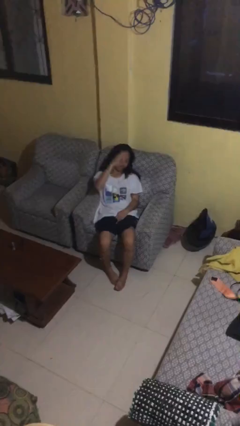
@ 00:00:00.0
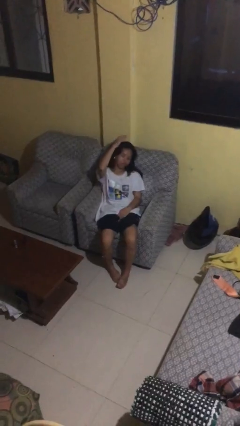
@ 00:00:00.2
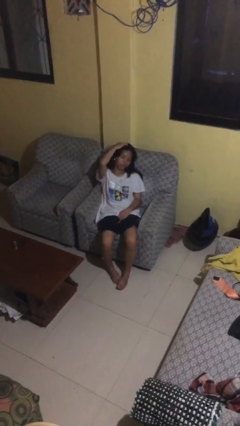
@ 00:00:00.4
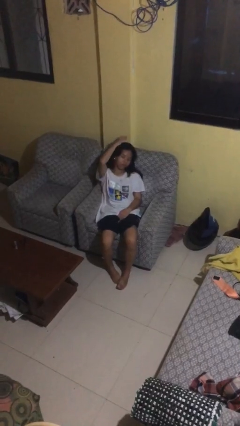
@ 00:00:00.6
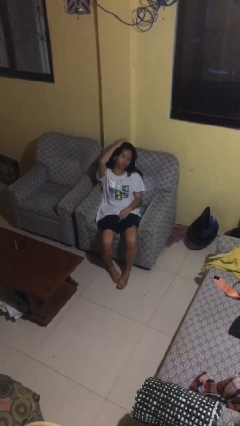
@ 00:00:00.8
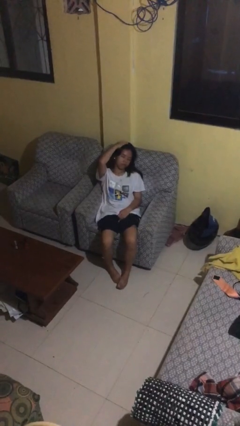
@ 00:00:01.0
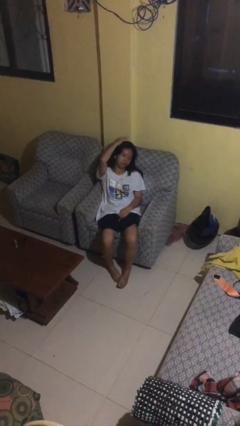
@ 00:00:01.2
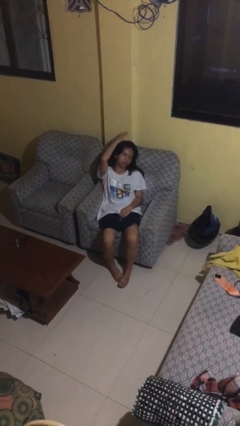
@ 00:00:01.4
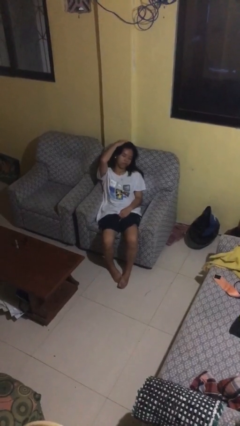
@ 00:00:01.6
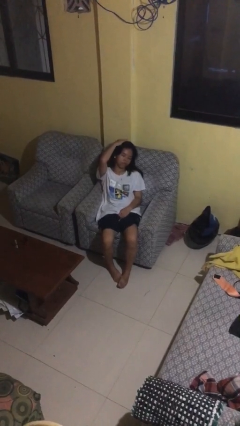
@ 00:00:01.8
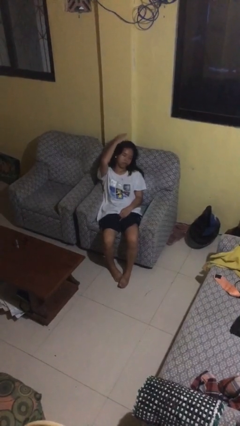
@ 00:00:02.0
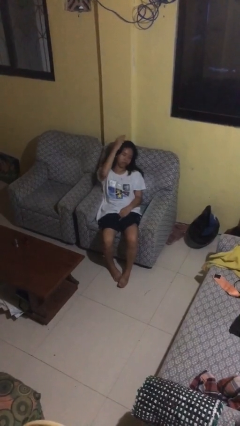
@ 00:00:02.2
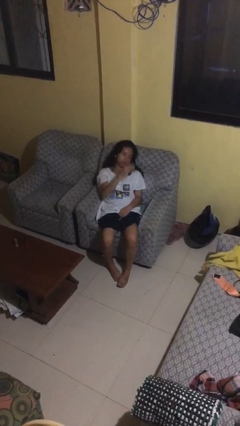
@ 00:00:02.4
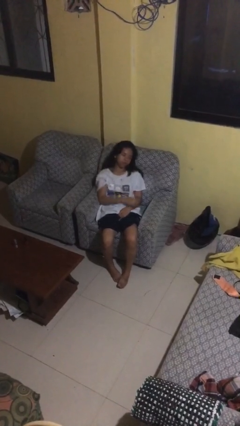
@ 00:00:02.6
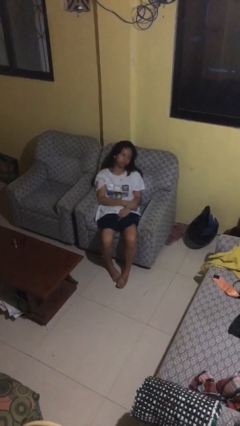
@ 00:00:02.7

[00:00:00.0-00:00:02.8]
person pats head

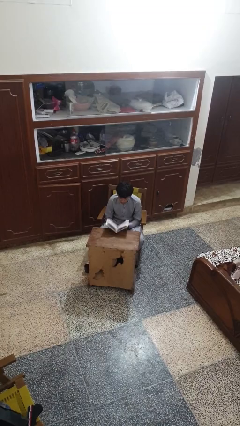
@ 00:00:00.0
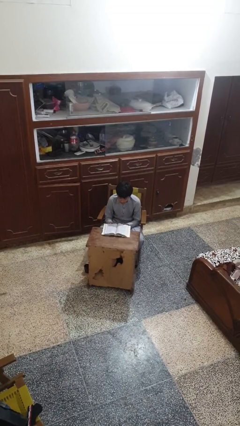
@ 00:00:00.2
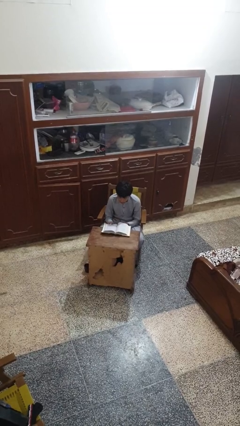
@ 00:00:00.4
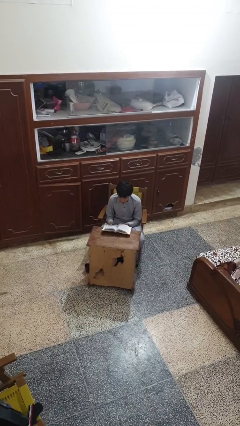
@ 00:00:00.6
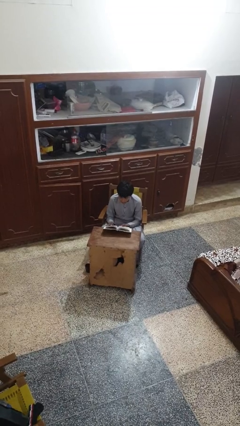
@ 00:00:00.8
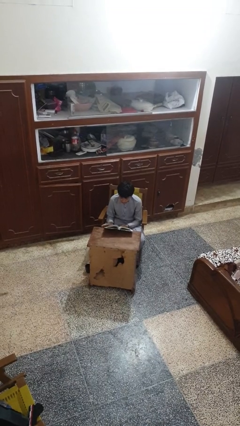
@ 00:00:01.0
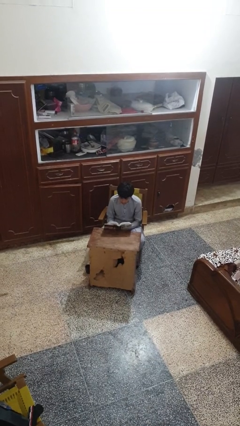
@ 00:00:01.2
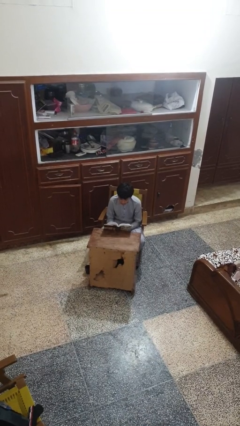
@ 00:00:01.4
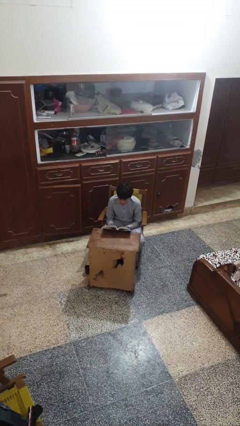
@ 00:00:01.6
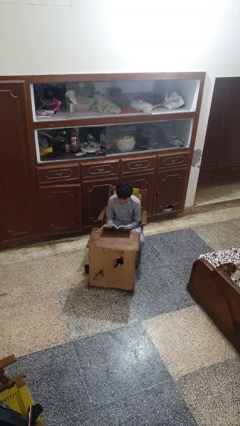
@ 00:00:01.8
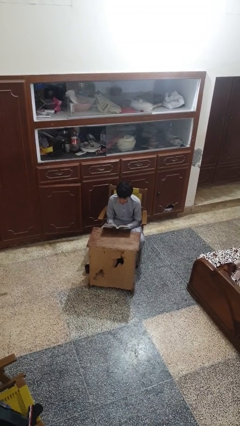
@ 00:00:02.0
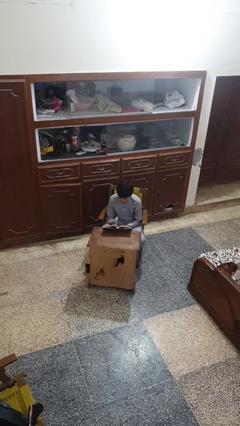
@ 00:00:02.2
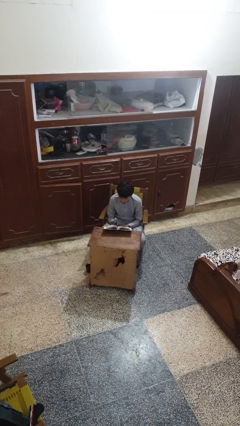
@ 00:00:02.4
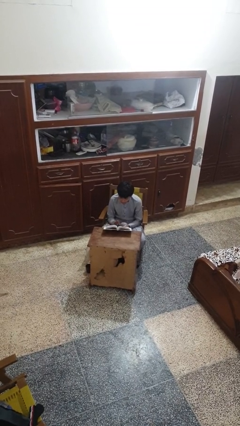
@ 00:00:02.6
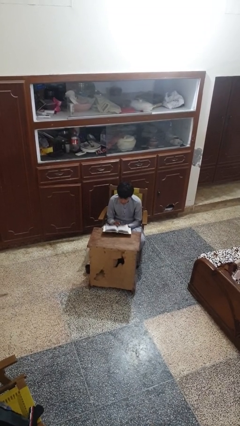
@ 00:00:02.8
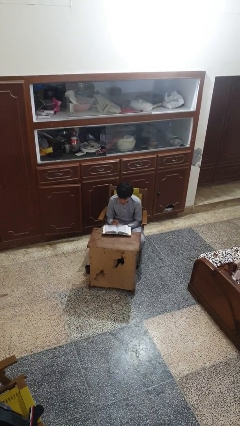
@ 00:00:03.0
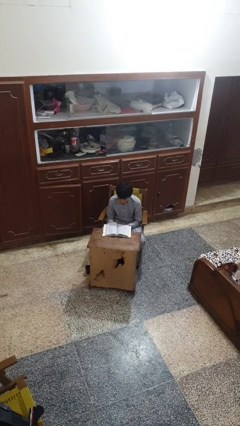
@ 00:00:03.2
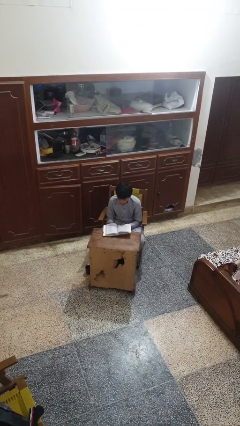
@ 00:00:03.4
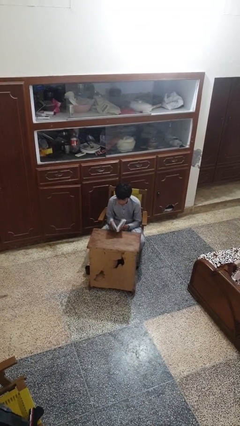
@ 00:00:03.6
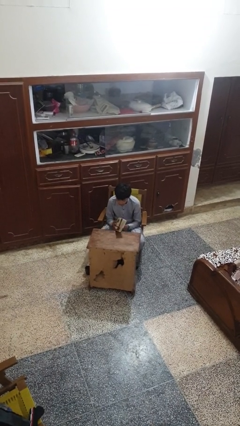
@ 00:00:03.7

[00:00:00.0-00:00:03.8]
person reads book

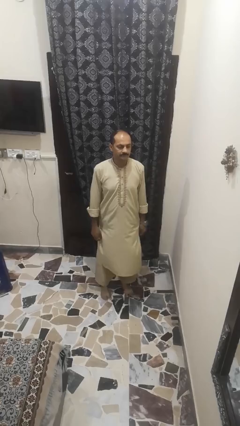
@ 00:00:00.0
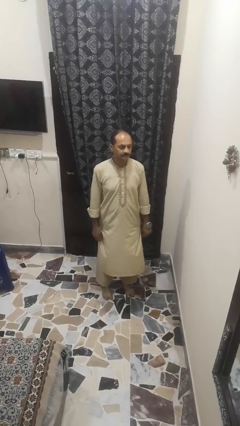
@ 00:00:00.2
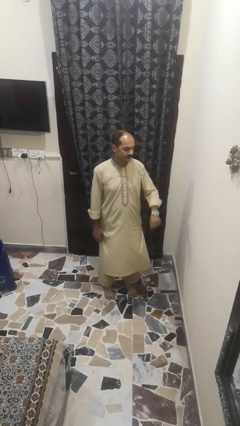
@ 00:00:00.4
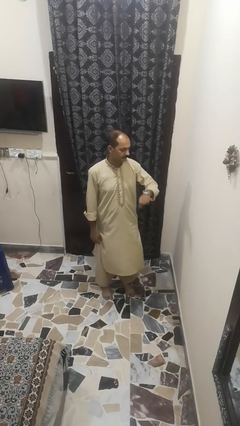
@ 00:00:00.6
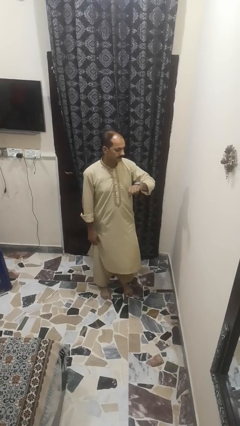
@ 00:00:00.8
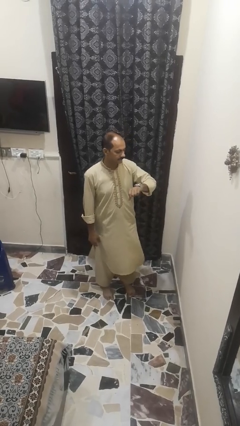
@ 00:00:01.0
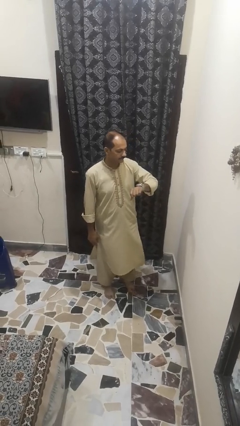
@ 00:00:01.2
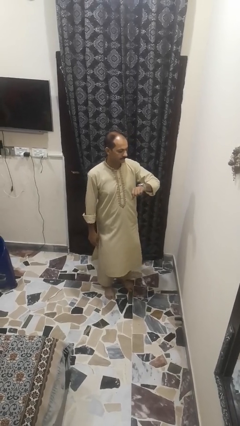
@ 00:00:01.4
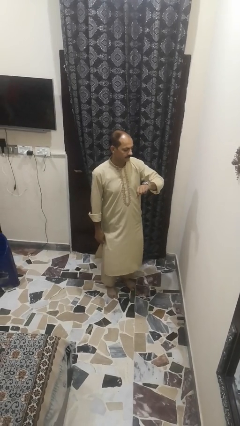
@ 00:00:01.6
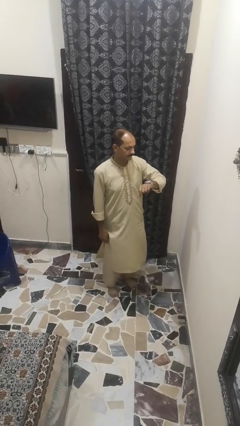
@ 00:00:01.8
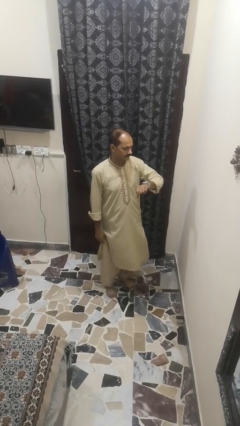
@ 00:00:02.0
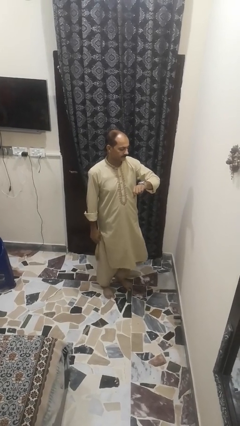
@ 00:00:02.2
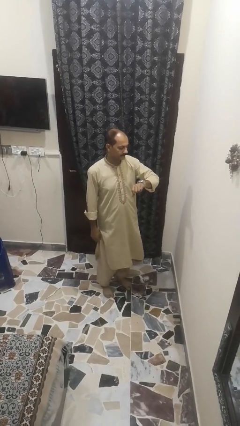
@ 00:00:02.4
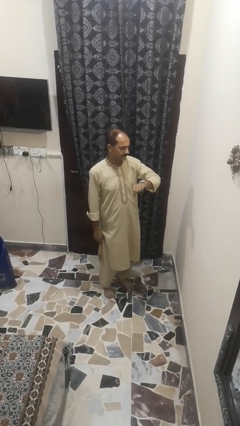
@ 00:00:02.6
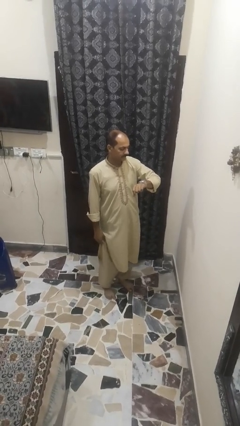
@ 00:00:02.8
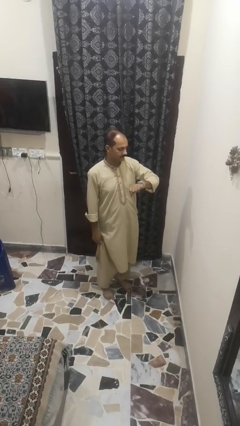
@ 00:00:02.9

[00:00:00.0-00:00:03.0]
person looks at wristwatch

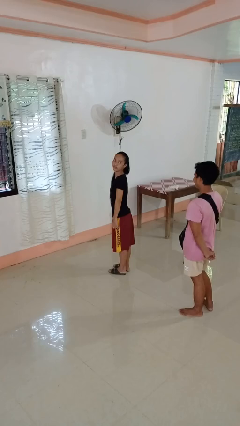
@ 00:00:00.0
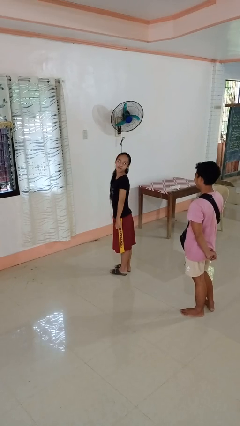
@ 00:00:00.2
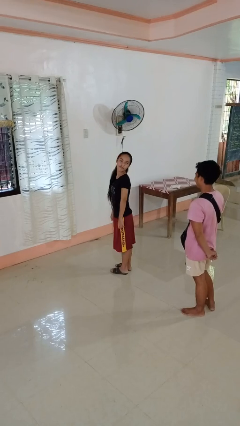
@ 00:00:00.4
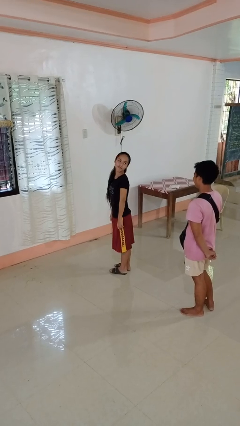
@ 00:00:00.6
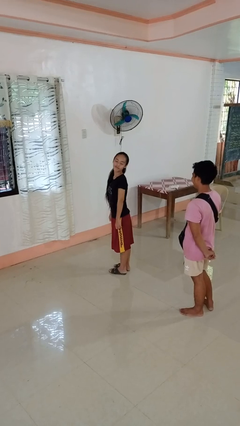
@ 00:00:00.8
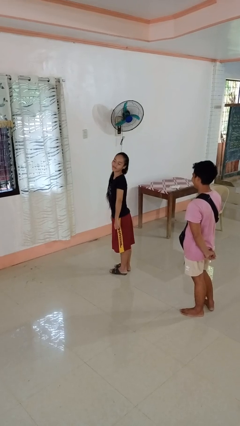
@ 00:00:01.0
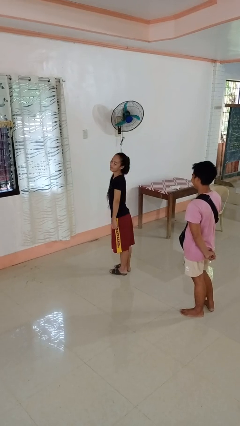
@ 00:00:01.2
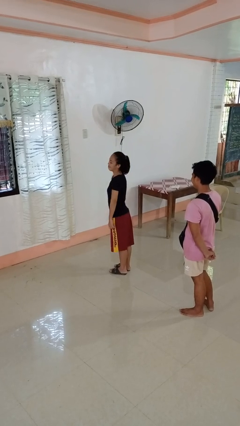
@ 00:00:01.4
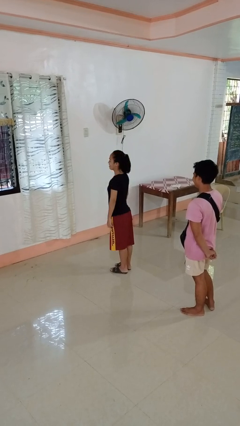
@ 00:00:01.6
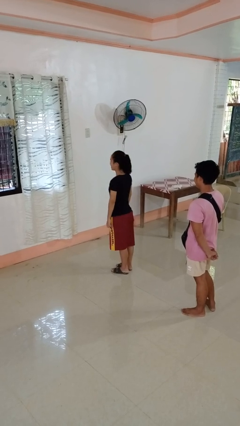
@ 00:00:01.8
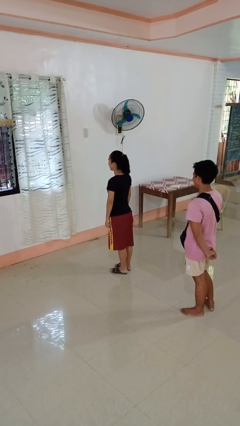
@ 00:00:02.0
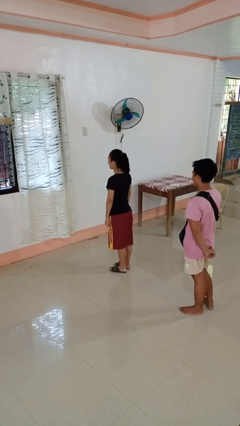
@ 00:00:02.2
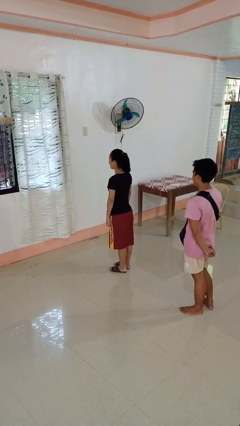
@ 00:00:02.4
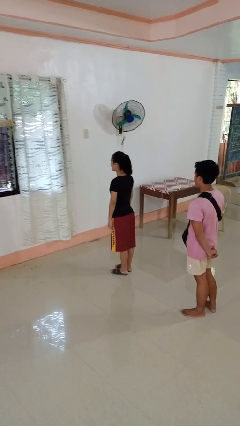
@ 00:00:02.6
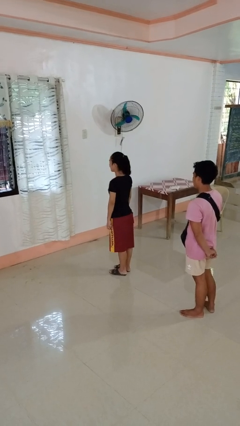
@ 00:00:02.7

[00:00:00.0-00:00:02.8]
person looks over shoulder

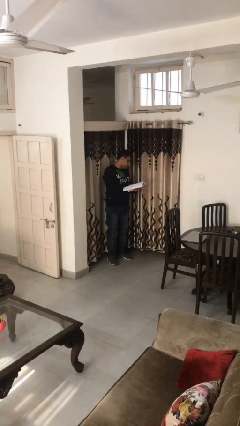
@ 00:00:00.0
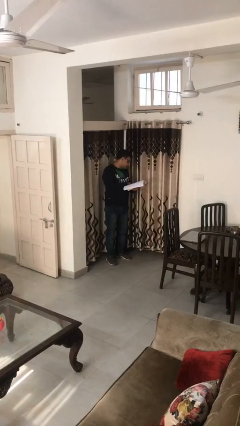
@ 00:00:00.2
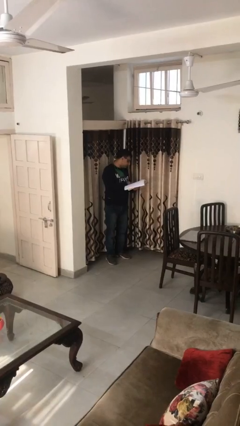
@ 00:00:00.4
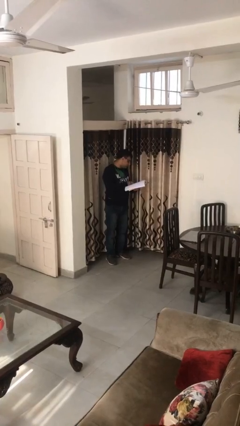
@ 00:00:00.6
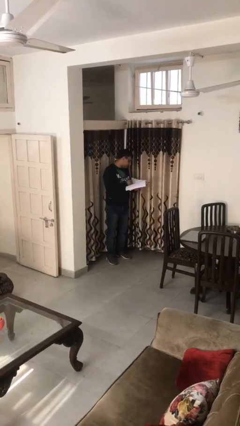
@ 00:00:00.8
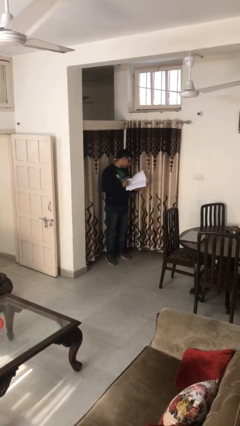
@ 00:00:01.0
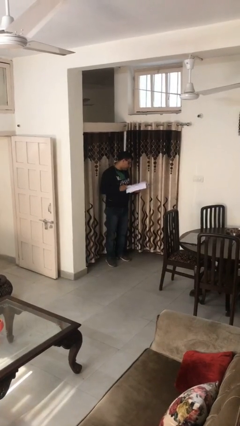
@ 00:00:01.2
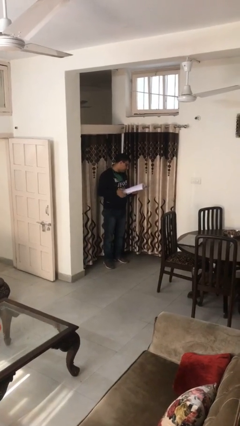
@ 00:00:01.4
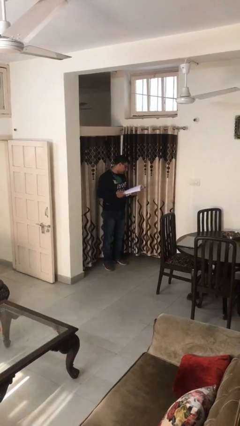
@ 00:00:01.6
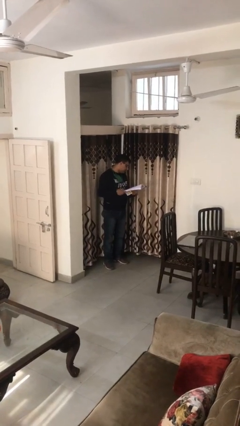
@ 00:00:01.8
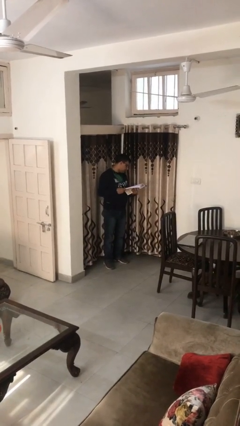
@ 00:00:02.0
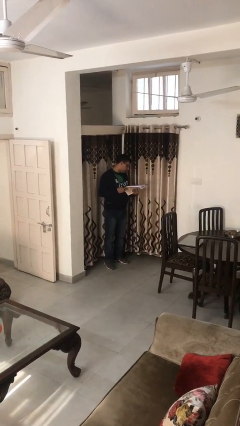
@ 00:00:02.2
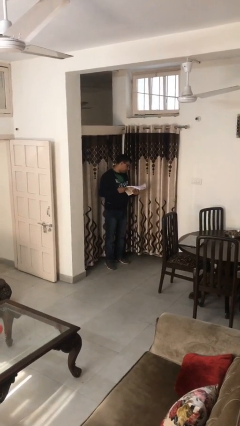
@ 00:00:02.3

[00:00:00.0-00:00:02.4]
person reads document

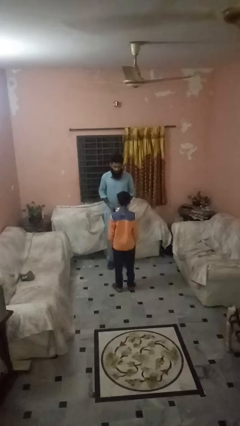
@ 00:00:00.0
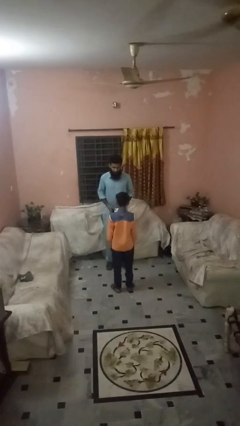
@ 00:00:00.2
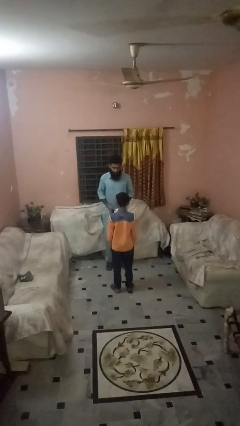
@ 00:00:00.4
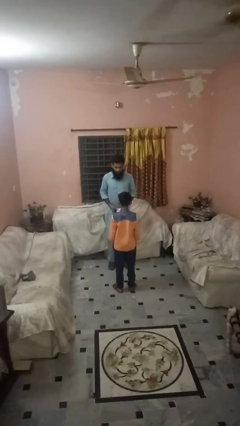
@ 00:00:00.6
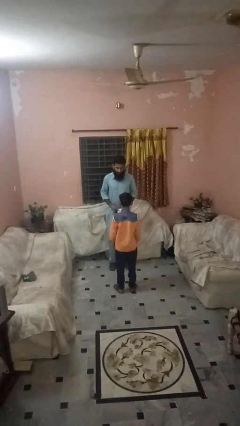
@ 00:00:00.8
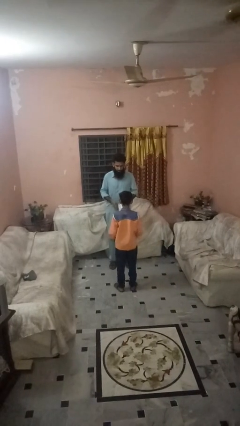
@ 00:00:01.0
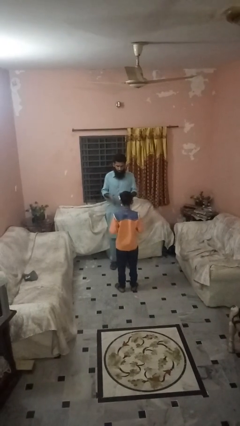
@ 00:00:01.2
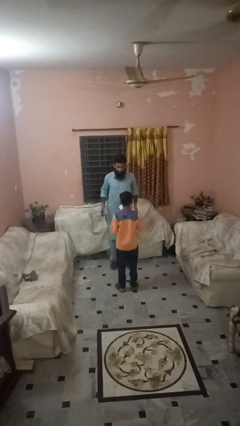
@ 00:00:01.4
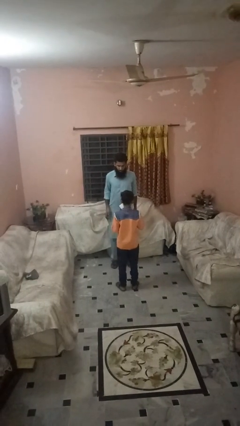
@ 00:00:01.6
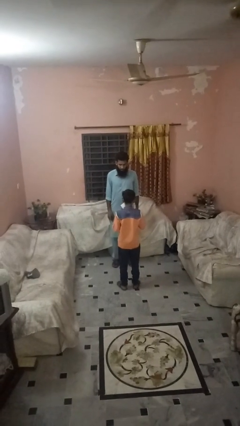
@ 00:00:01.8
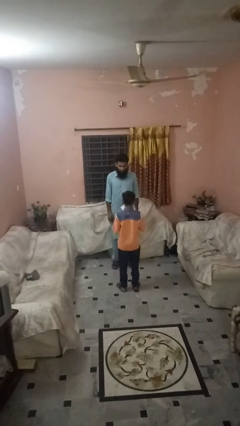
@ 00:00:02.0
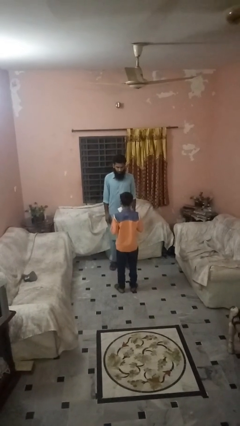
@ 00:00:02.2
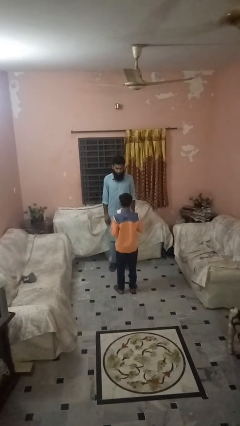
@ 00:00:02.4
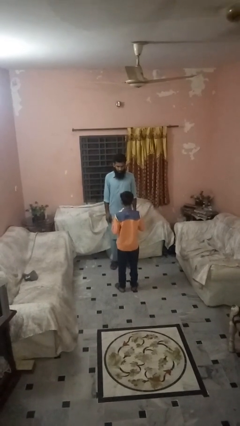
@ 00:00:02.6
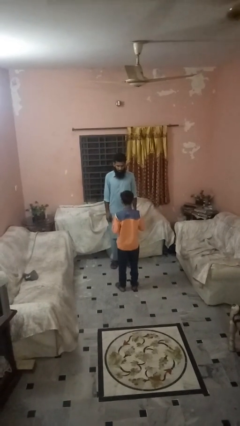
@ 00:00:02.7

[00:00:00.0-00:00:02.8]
person throws object to person
